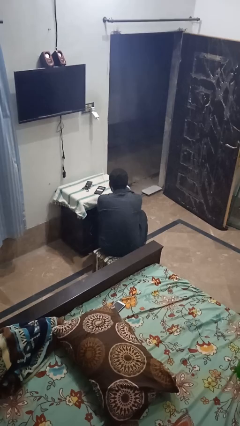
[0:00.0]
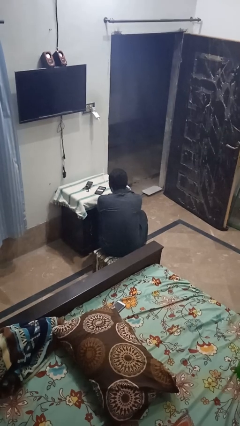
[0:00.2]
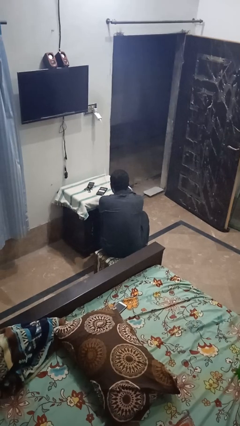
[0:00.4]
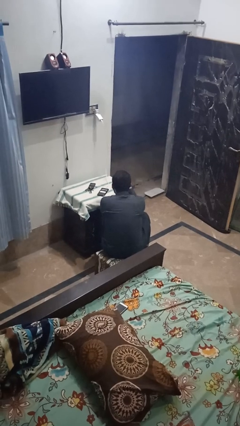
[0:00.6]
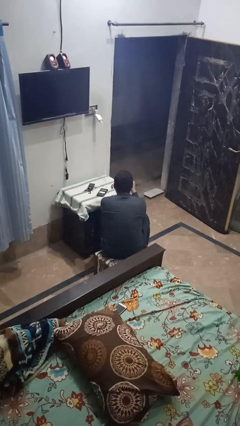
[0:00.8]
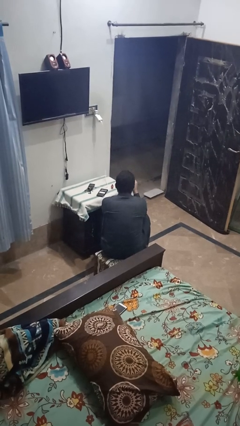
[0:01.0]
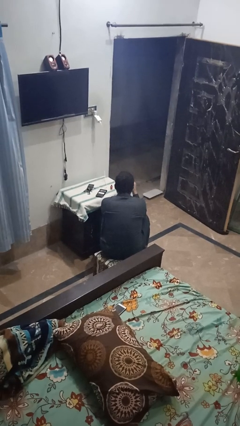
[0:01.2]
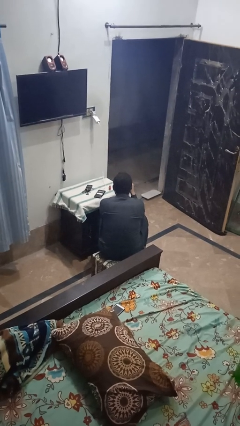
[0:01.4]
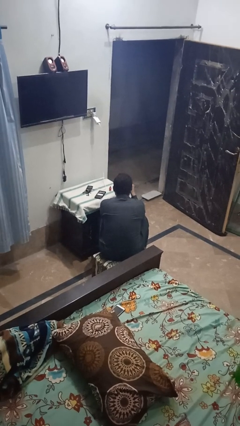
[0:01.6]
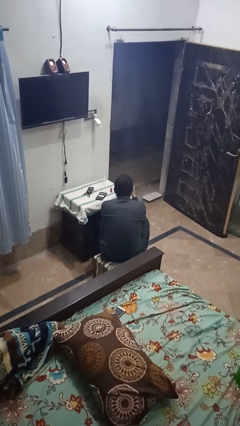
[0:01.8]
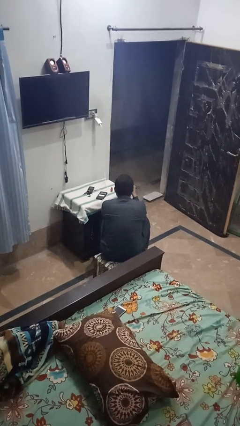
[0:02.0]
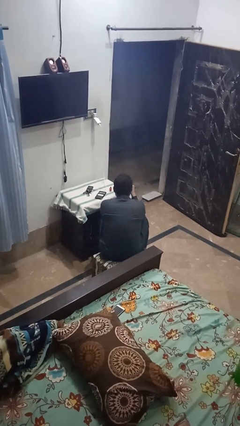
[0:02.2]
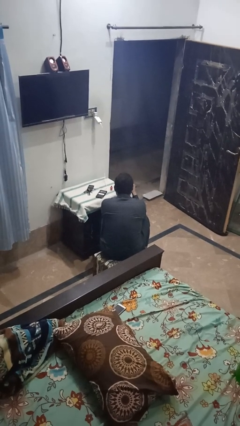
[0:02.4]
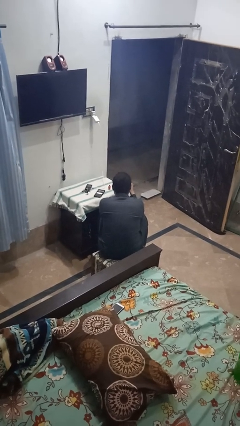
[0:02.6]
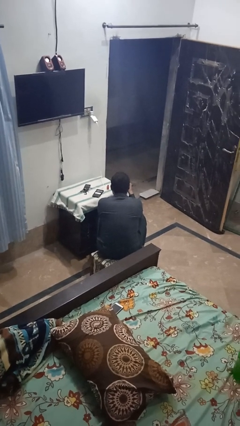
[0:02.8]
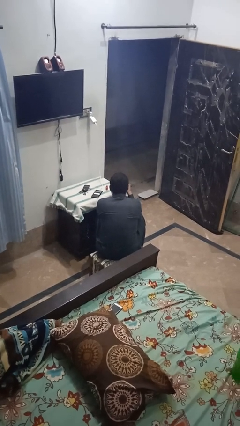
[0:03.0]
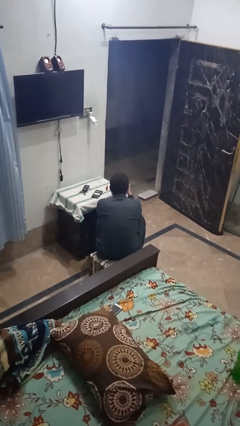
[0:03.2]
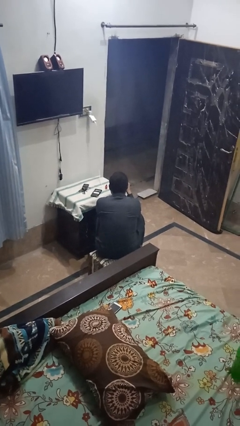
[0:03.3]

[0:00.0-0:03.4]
person paints fingernails

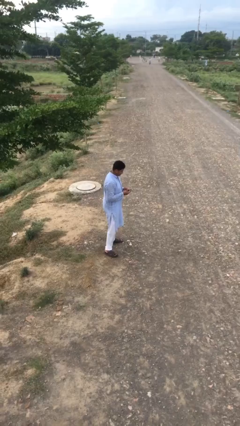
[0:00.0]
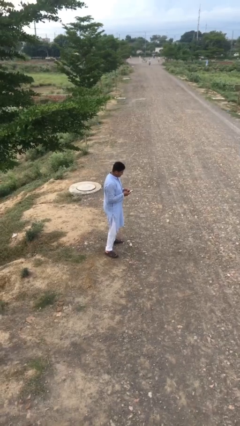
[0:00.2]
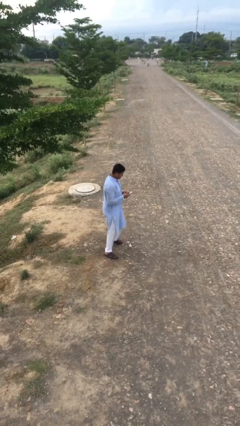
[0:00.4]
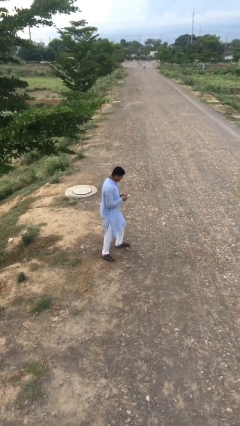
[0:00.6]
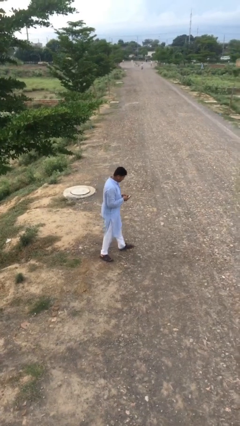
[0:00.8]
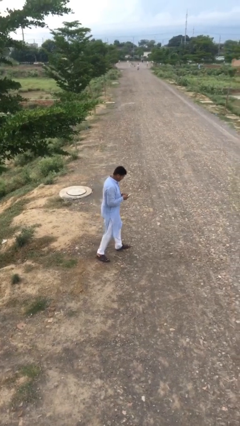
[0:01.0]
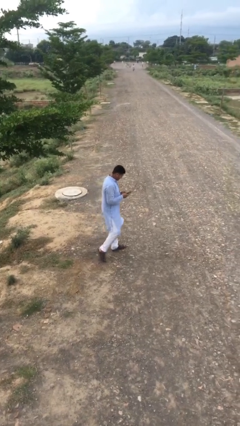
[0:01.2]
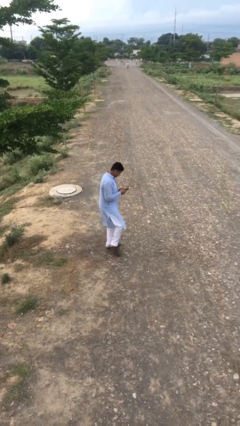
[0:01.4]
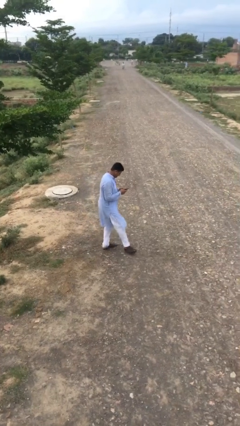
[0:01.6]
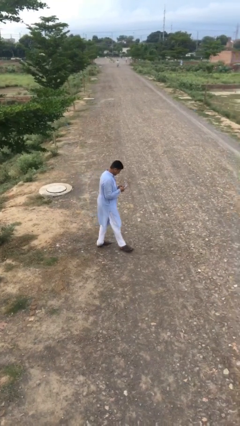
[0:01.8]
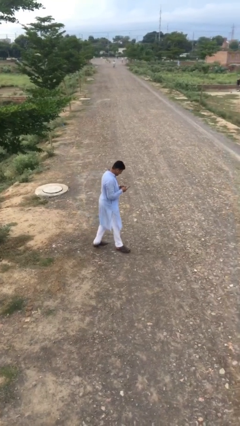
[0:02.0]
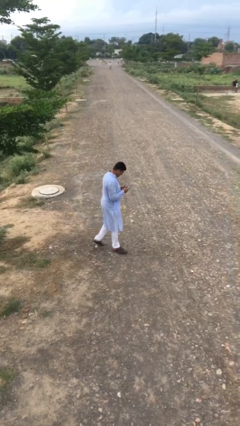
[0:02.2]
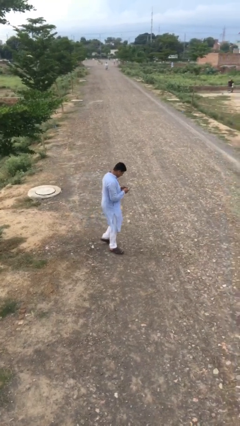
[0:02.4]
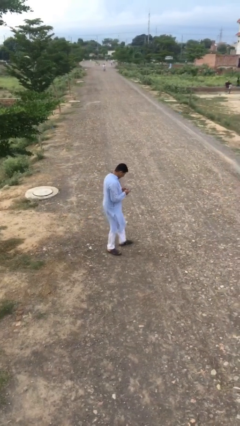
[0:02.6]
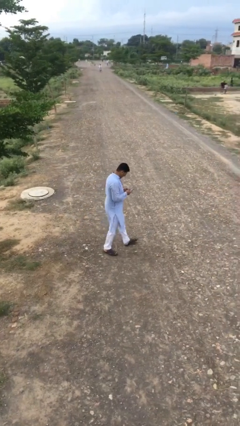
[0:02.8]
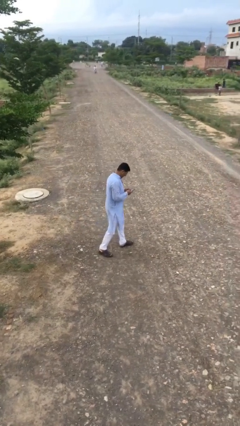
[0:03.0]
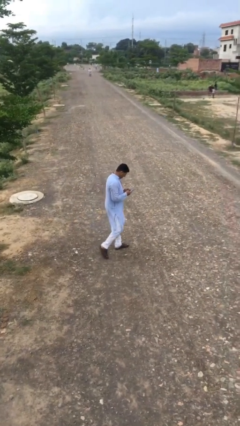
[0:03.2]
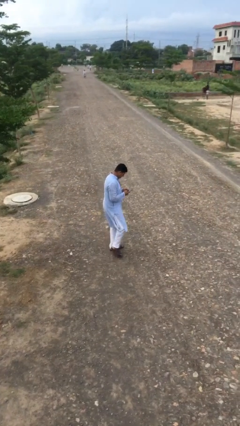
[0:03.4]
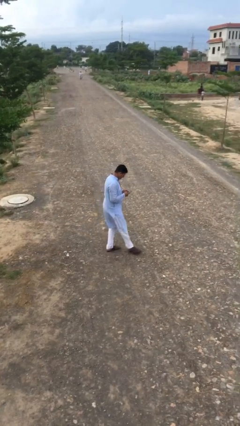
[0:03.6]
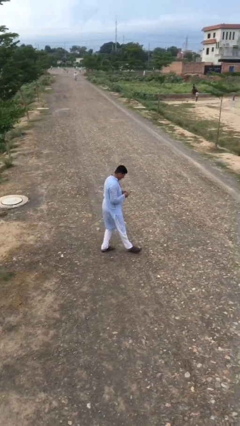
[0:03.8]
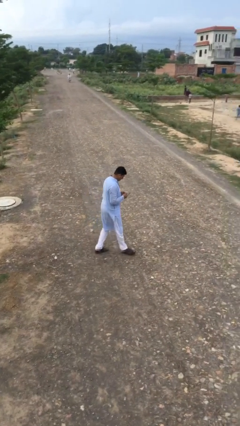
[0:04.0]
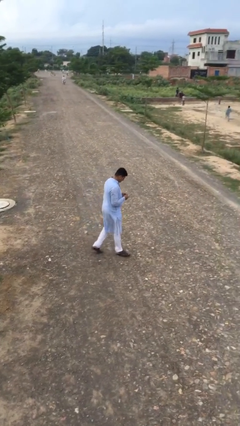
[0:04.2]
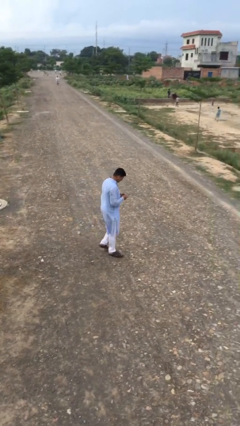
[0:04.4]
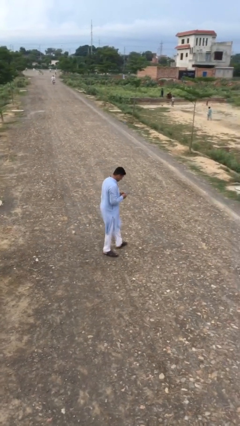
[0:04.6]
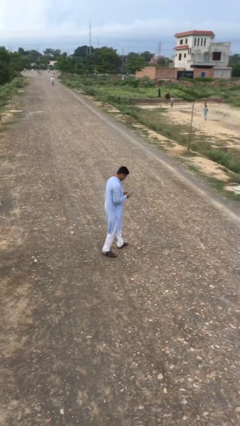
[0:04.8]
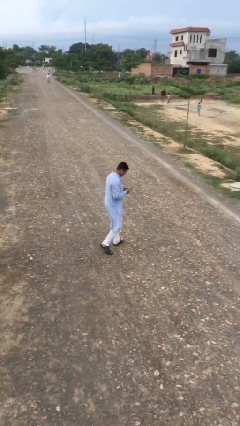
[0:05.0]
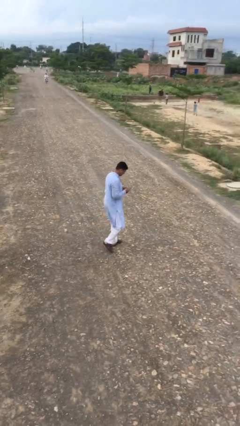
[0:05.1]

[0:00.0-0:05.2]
person texts on phone

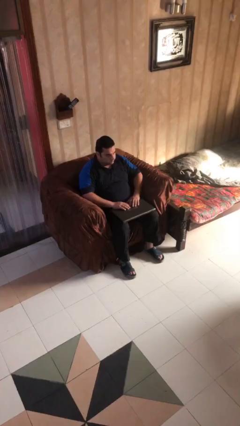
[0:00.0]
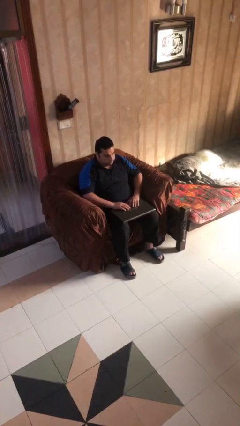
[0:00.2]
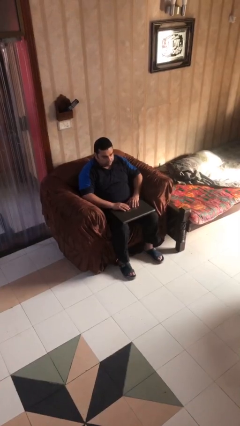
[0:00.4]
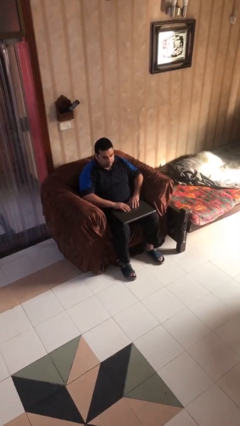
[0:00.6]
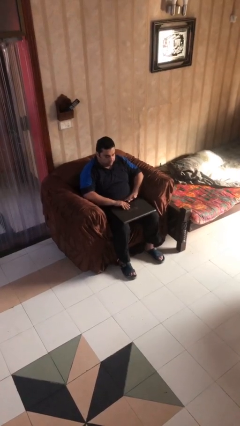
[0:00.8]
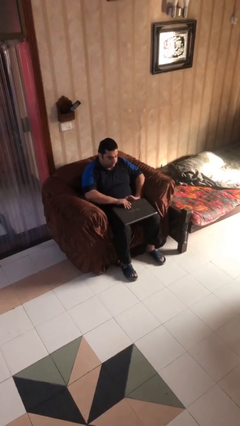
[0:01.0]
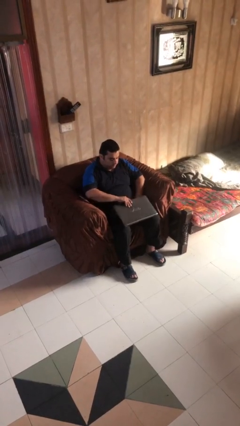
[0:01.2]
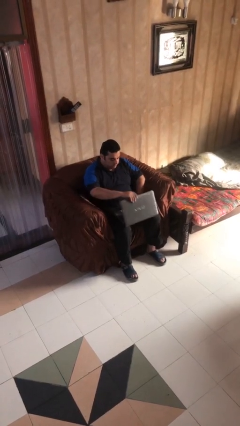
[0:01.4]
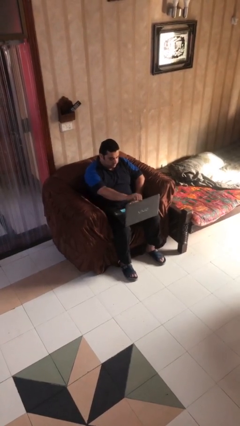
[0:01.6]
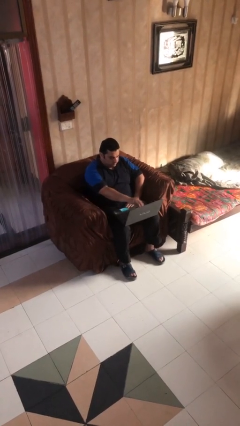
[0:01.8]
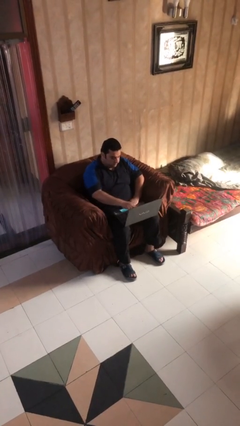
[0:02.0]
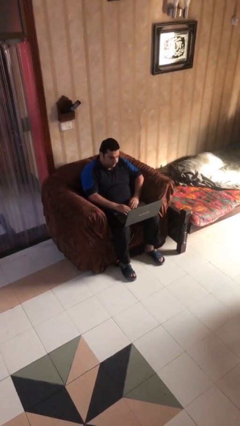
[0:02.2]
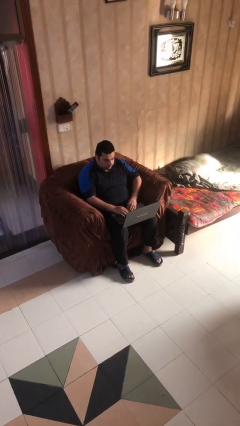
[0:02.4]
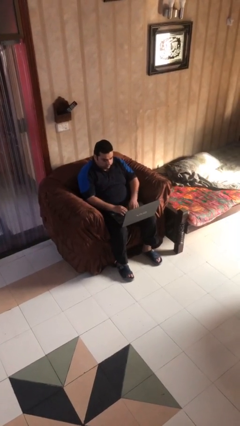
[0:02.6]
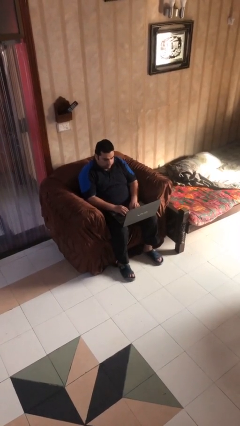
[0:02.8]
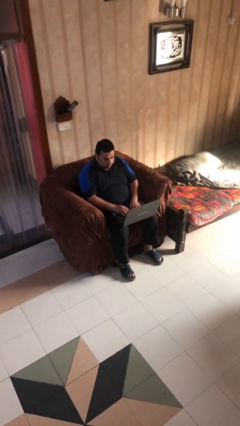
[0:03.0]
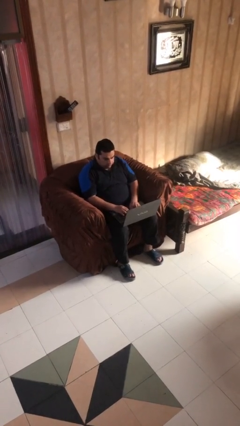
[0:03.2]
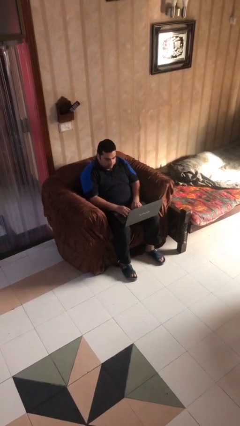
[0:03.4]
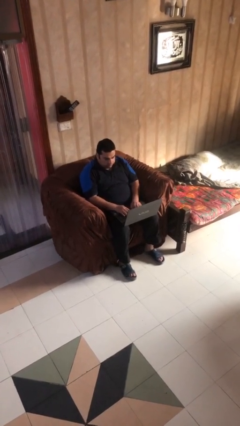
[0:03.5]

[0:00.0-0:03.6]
person opens laptop

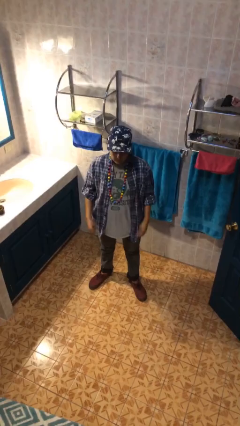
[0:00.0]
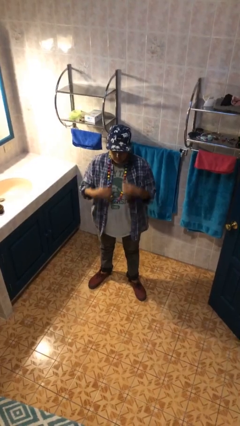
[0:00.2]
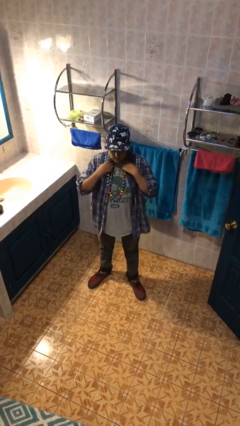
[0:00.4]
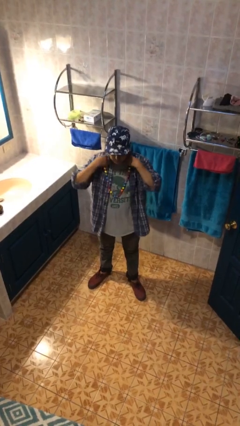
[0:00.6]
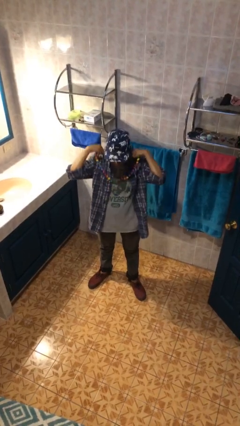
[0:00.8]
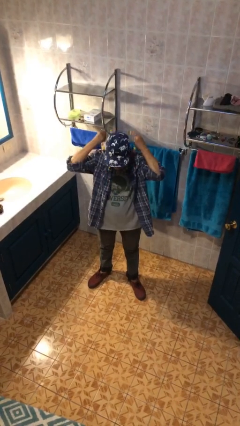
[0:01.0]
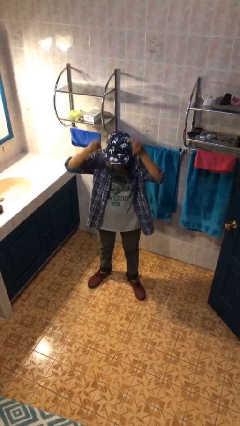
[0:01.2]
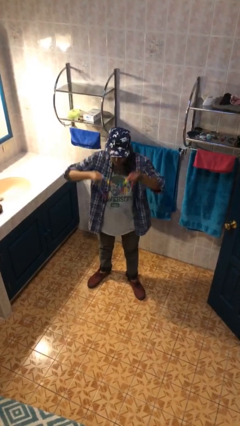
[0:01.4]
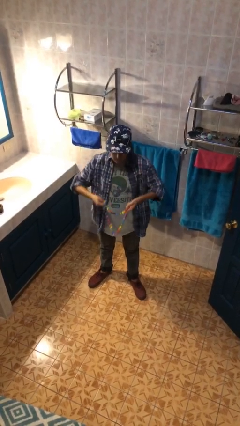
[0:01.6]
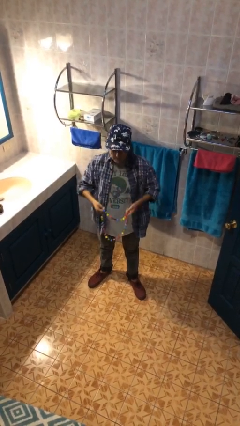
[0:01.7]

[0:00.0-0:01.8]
person takes off necklace

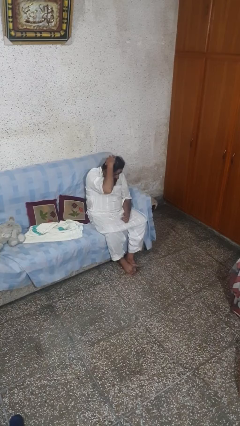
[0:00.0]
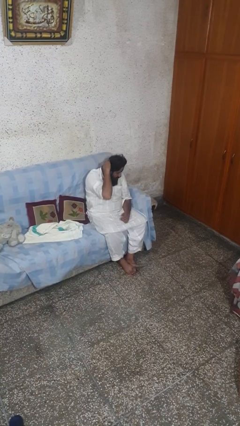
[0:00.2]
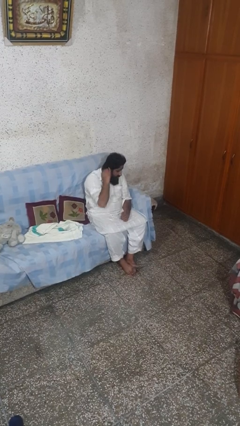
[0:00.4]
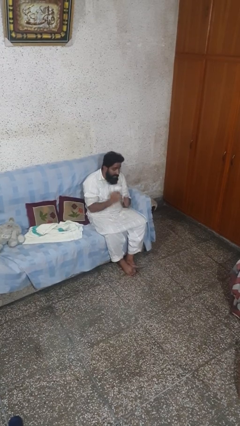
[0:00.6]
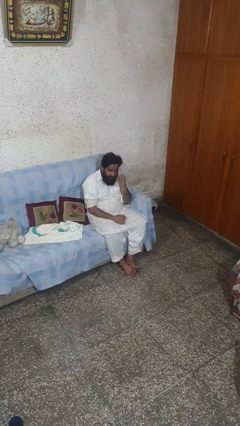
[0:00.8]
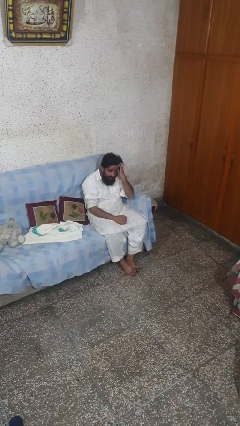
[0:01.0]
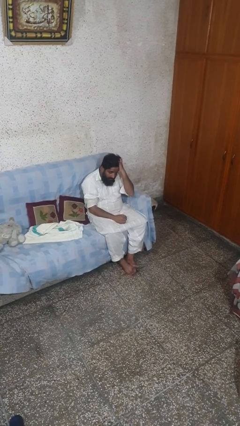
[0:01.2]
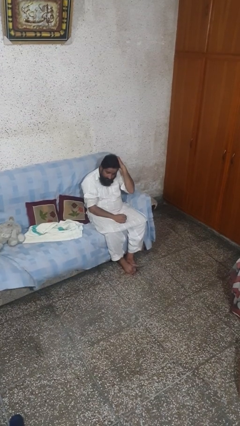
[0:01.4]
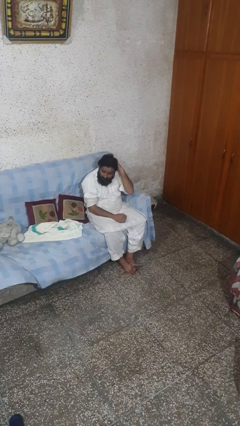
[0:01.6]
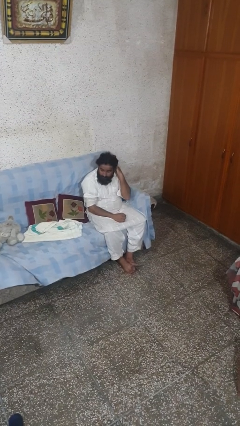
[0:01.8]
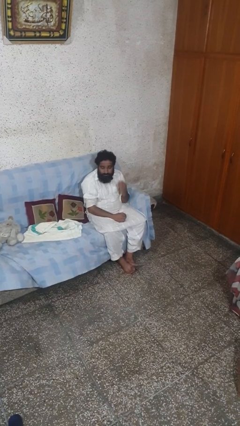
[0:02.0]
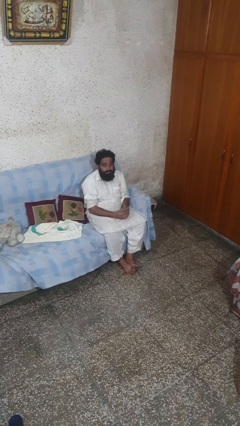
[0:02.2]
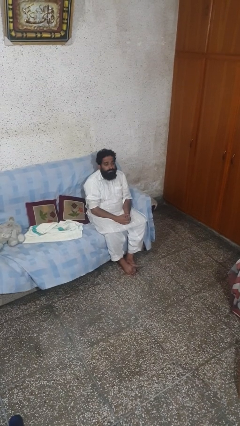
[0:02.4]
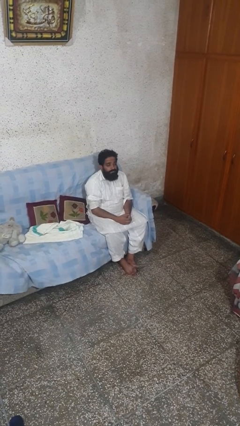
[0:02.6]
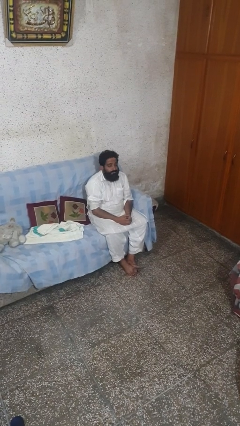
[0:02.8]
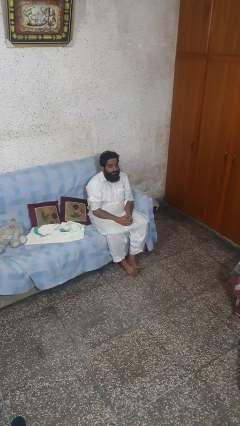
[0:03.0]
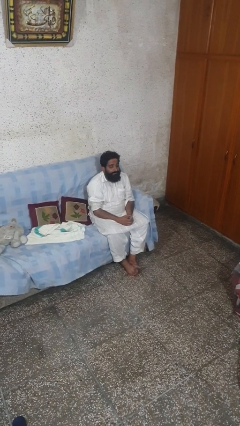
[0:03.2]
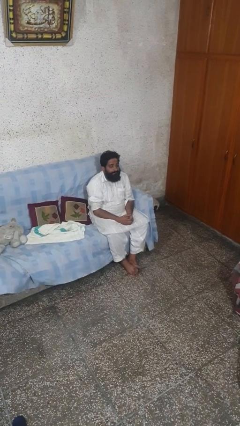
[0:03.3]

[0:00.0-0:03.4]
person strokes hair
